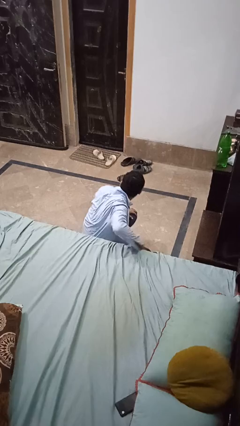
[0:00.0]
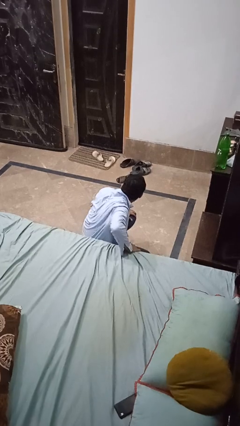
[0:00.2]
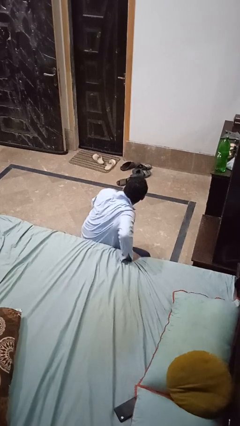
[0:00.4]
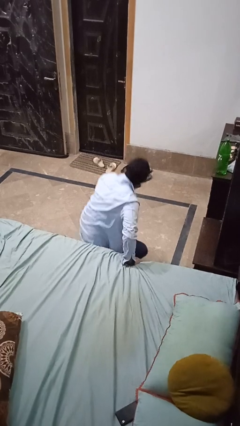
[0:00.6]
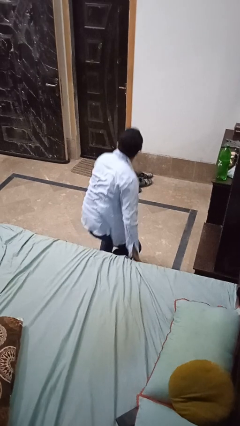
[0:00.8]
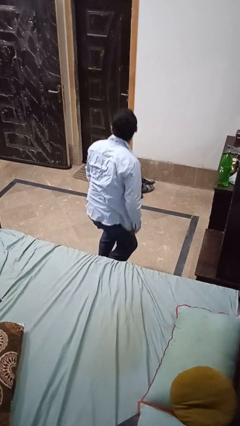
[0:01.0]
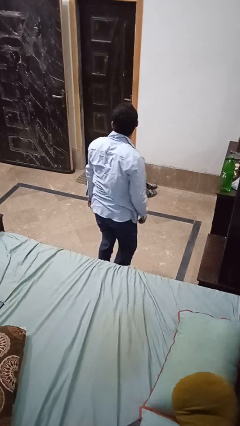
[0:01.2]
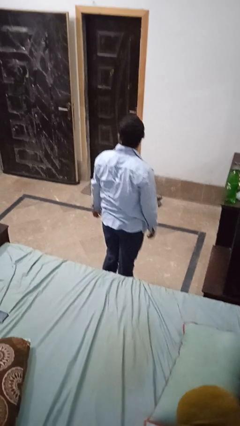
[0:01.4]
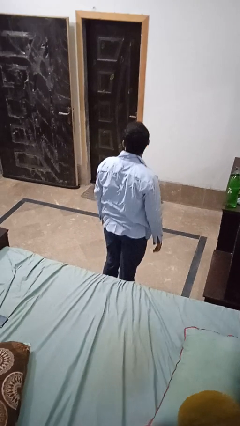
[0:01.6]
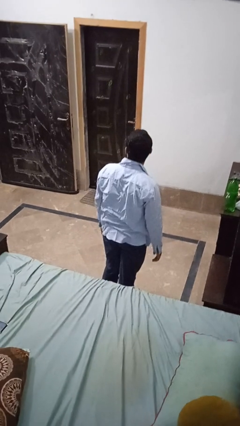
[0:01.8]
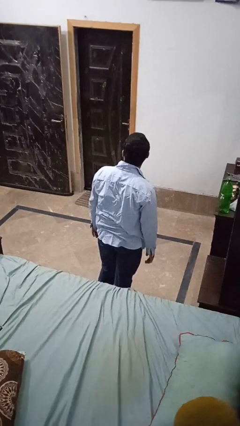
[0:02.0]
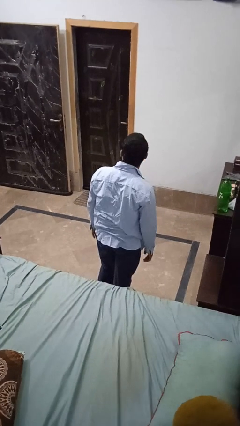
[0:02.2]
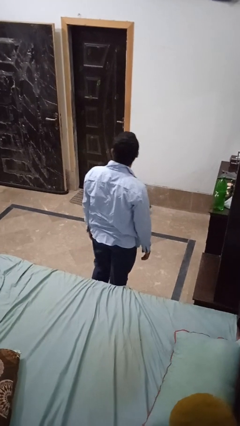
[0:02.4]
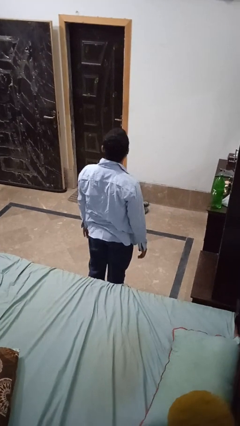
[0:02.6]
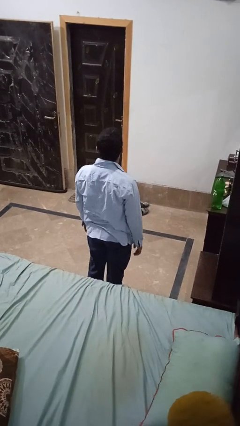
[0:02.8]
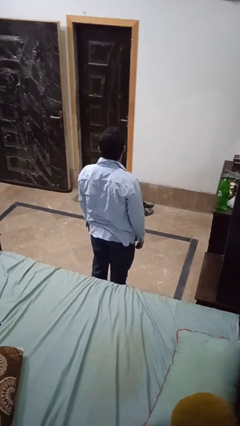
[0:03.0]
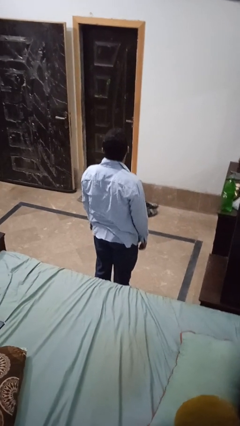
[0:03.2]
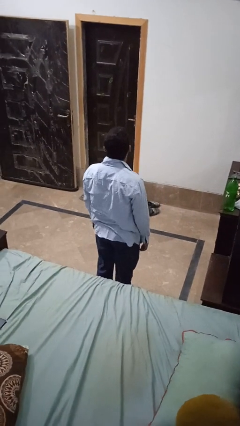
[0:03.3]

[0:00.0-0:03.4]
person stands up from floor

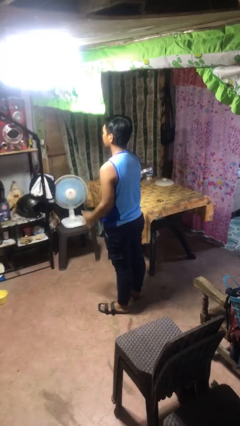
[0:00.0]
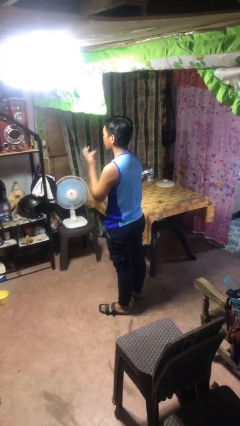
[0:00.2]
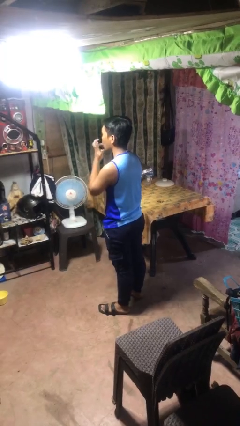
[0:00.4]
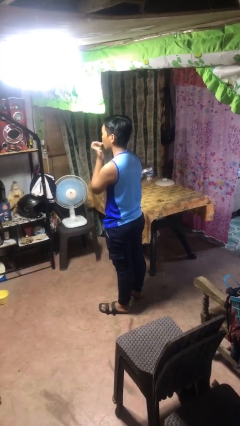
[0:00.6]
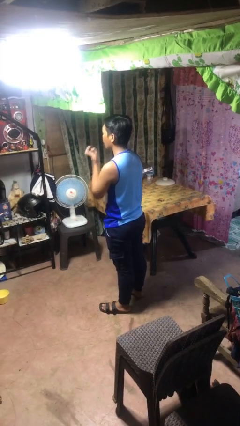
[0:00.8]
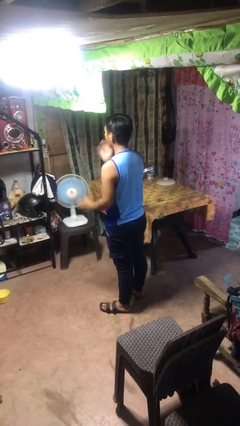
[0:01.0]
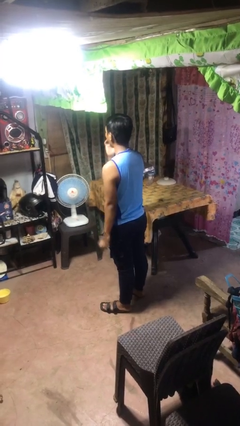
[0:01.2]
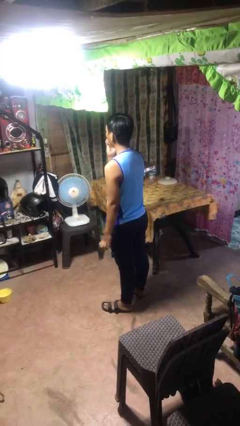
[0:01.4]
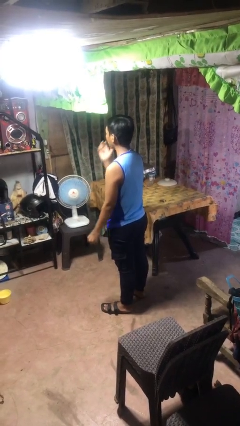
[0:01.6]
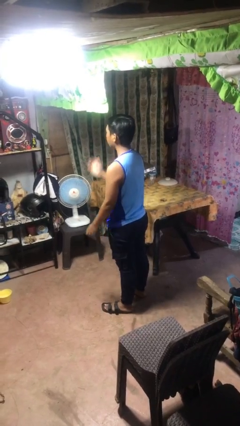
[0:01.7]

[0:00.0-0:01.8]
person licks fingers

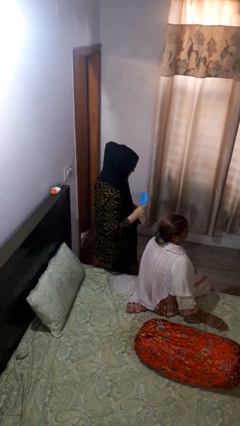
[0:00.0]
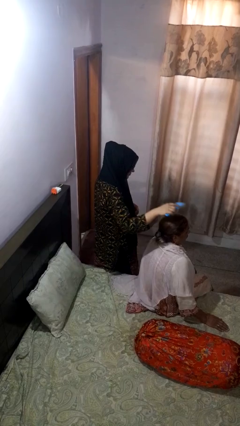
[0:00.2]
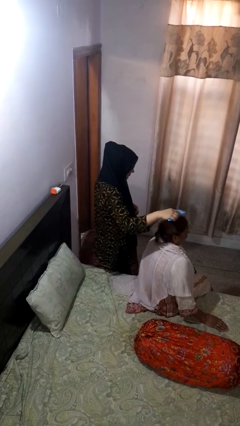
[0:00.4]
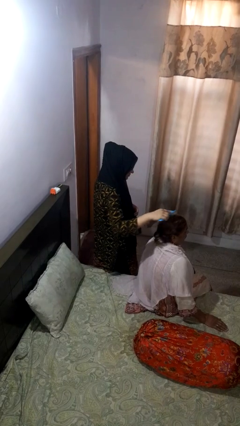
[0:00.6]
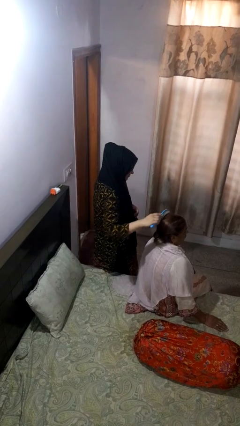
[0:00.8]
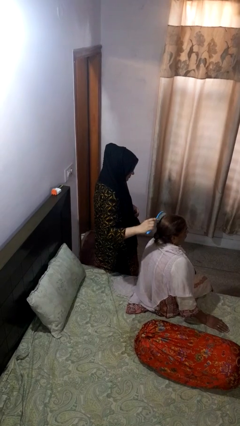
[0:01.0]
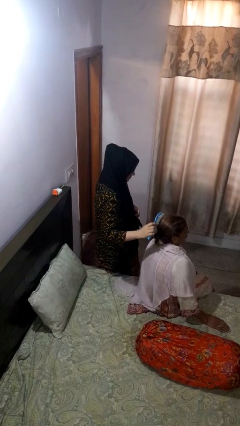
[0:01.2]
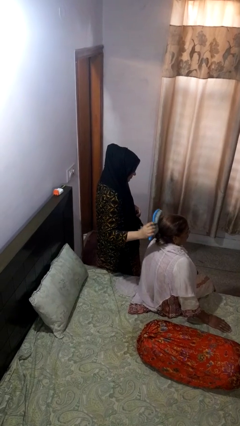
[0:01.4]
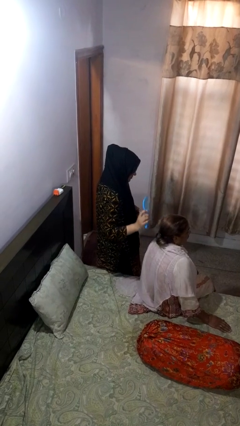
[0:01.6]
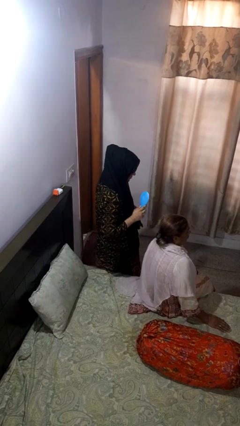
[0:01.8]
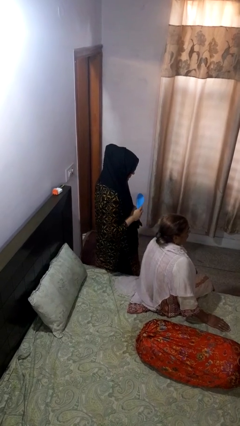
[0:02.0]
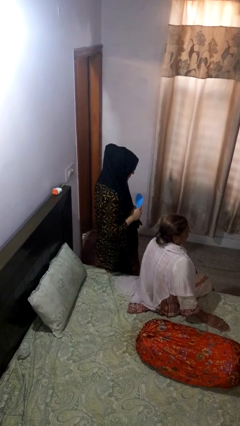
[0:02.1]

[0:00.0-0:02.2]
person brushes hair of person

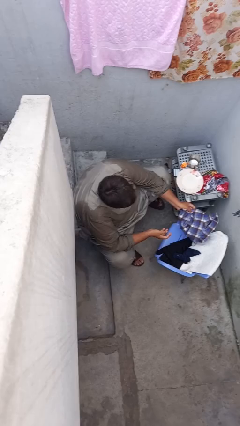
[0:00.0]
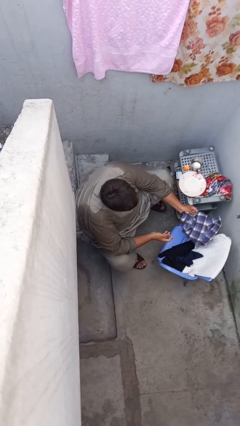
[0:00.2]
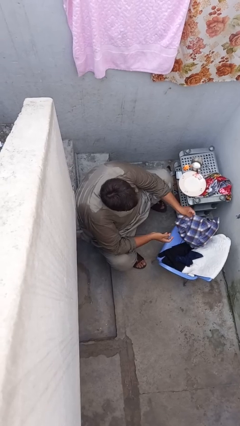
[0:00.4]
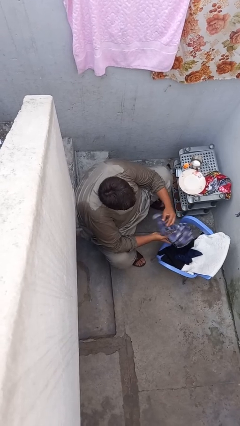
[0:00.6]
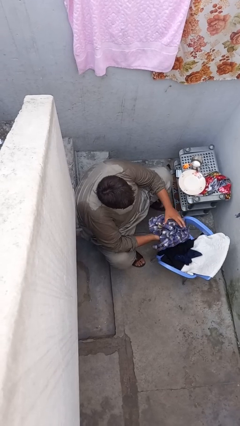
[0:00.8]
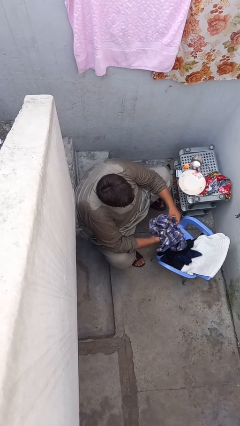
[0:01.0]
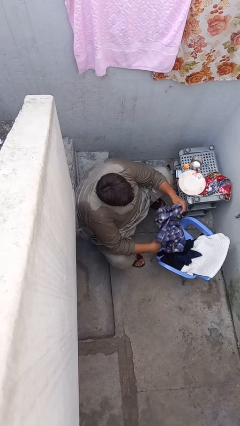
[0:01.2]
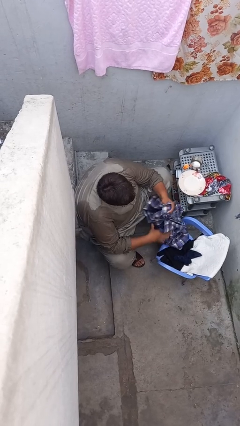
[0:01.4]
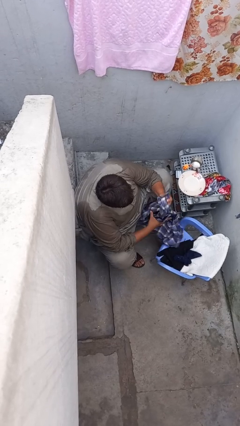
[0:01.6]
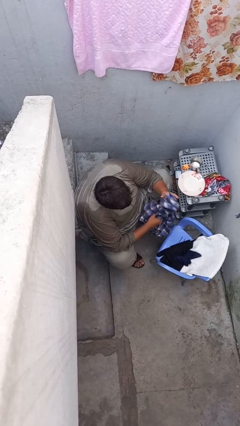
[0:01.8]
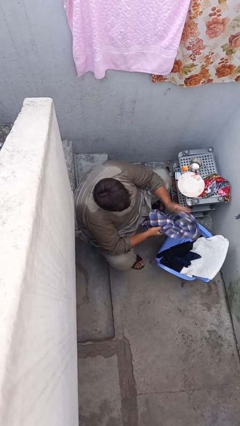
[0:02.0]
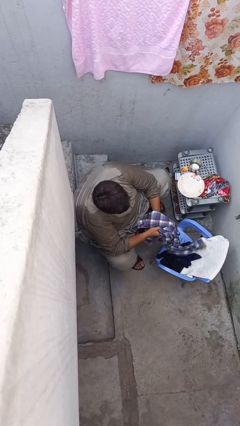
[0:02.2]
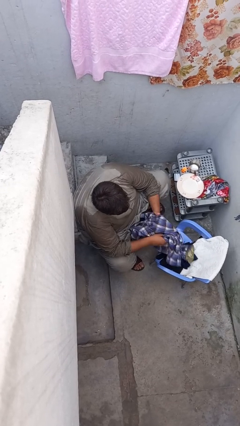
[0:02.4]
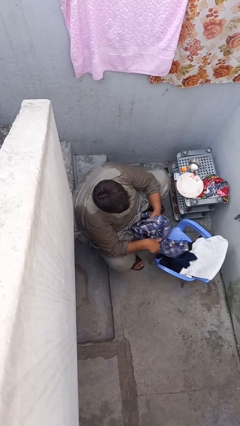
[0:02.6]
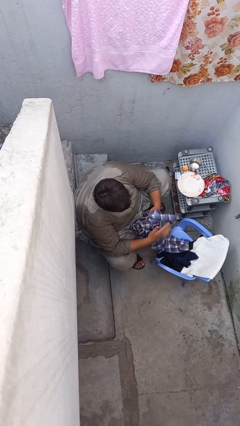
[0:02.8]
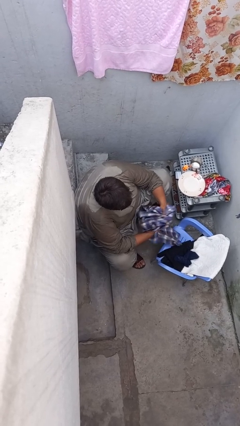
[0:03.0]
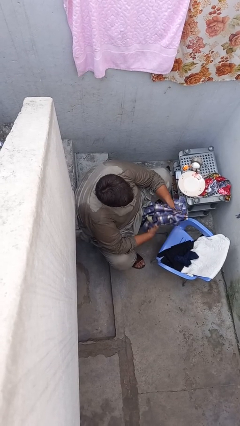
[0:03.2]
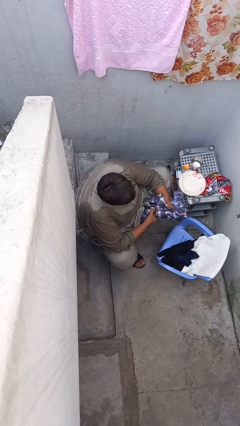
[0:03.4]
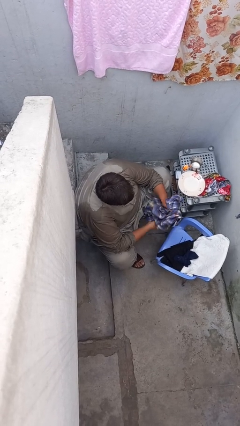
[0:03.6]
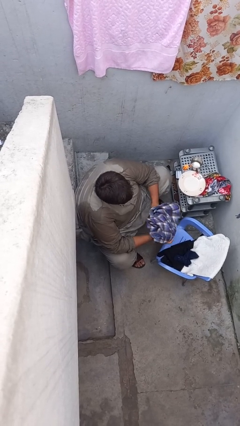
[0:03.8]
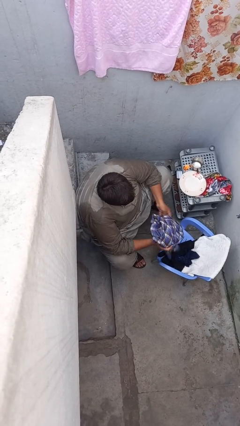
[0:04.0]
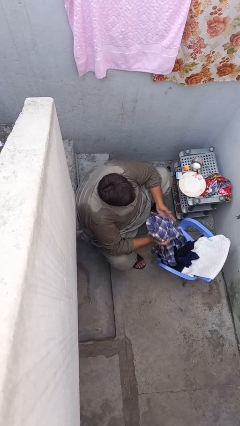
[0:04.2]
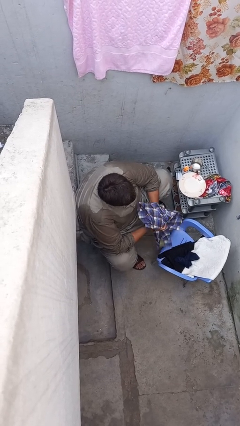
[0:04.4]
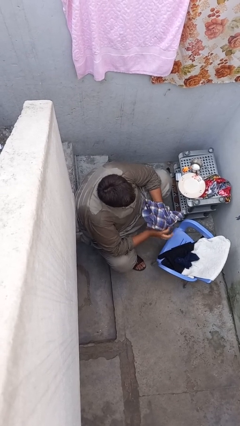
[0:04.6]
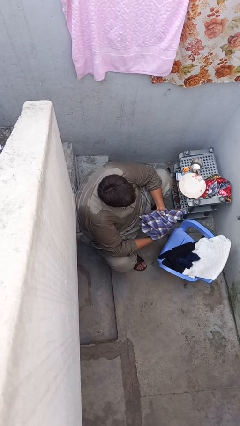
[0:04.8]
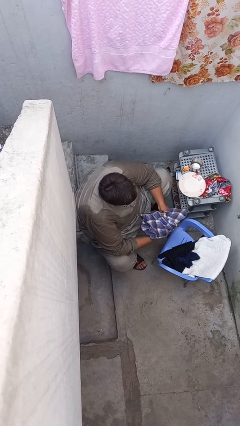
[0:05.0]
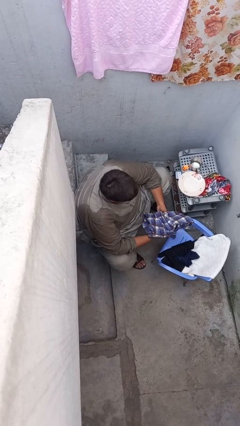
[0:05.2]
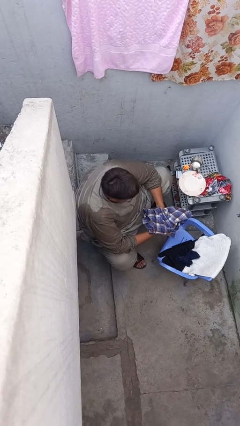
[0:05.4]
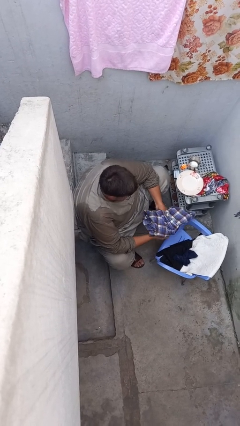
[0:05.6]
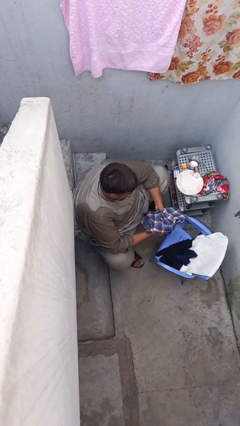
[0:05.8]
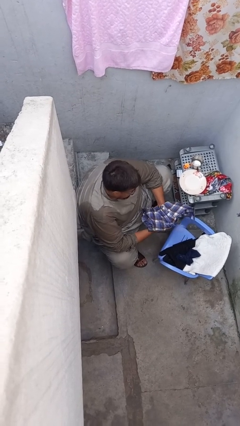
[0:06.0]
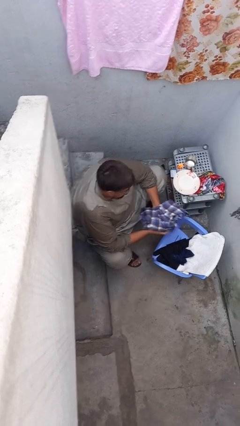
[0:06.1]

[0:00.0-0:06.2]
person folds shirt

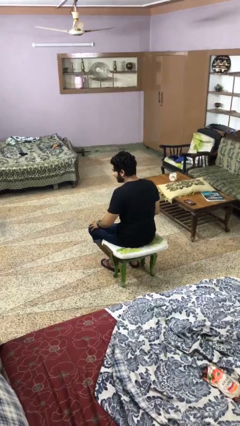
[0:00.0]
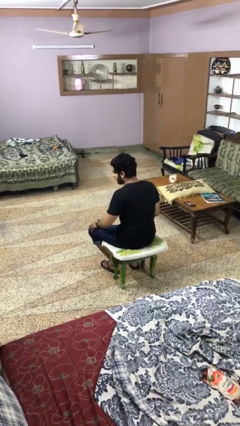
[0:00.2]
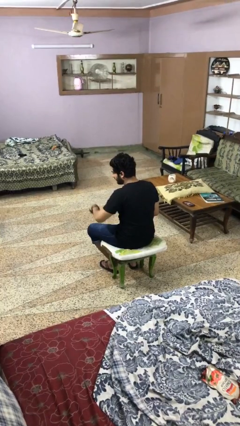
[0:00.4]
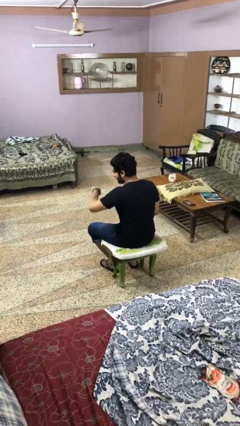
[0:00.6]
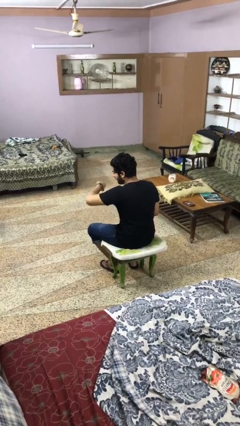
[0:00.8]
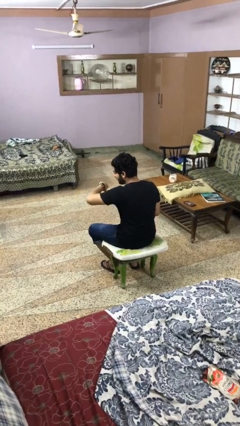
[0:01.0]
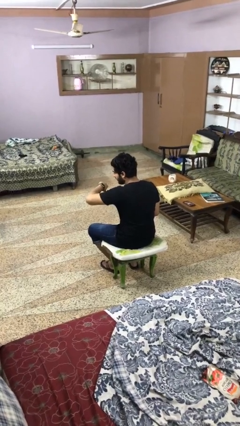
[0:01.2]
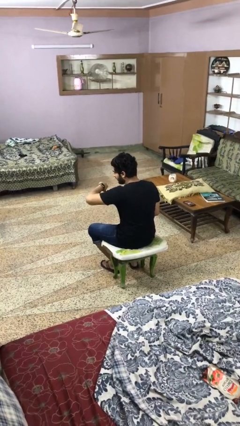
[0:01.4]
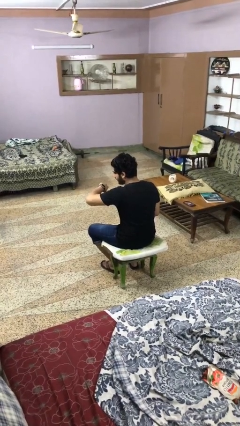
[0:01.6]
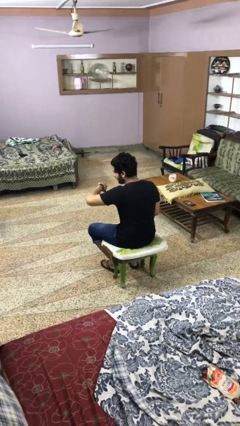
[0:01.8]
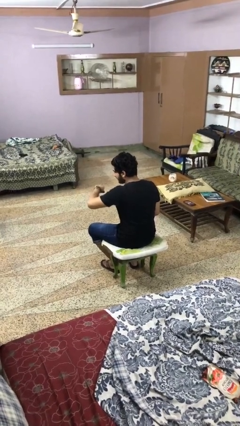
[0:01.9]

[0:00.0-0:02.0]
person looks at wristwatch

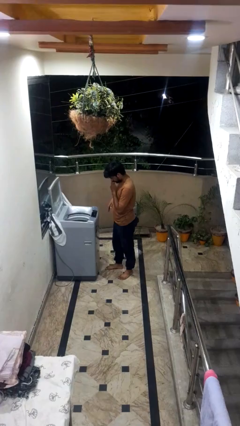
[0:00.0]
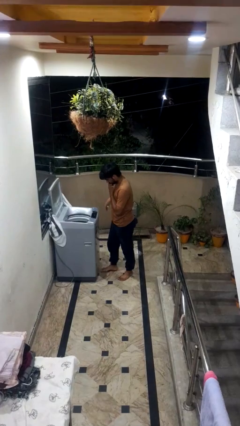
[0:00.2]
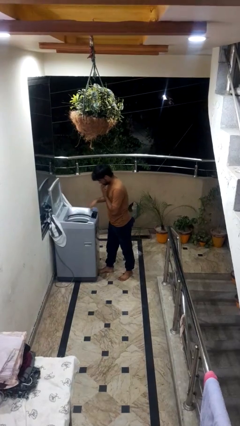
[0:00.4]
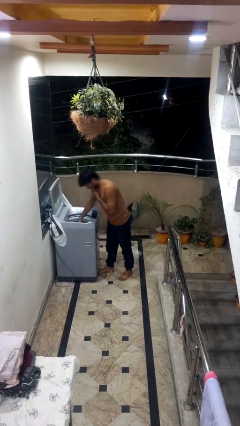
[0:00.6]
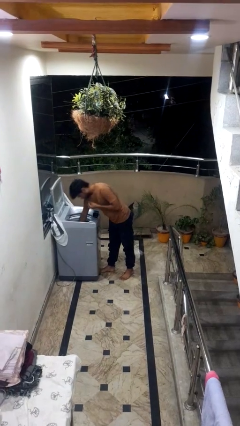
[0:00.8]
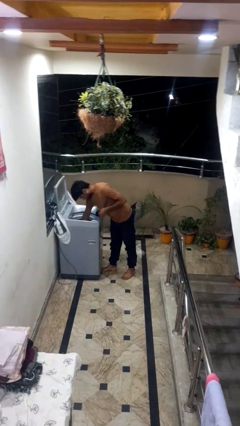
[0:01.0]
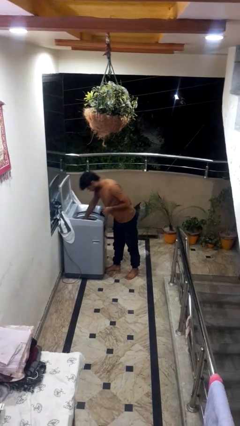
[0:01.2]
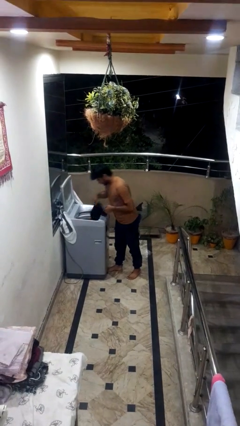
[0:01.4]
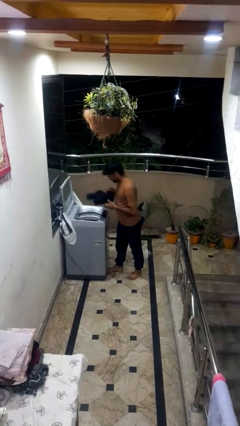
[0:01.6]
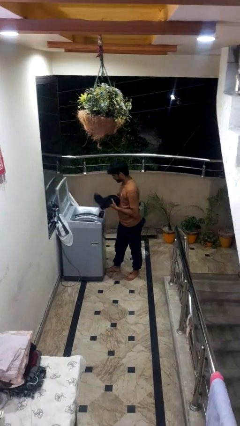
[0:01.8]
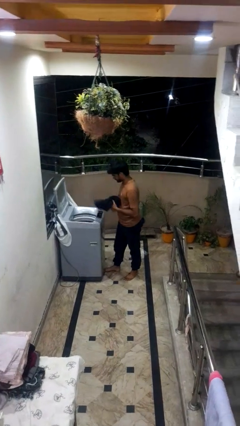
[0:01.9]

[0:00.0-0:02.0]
person loads clotheswasher
